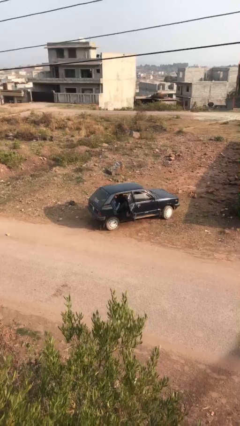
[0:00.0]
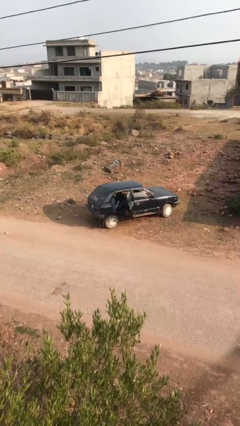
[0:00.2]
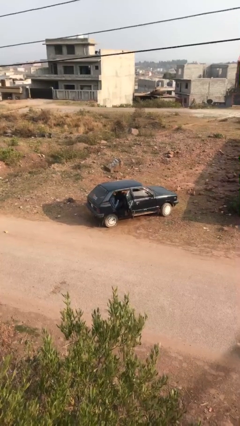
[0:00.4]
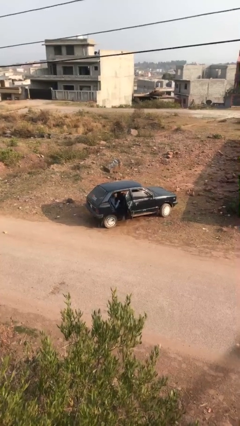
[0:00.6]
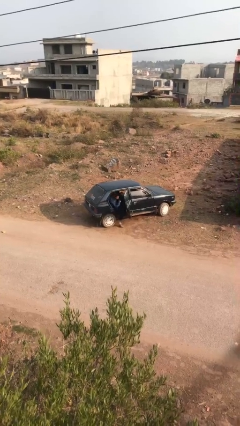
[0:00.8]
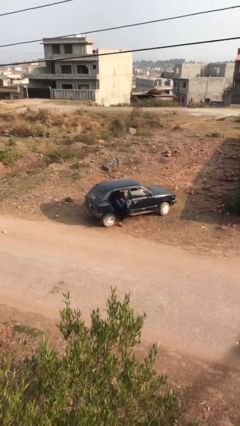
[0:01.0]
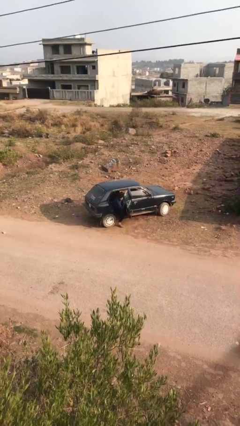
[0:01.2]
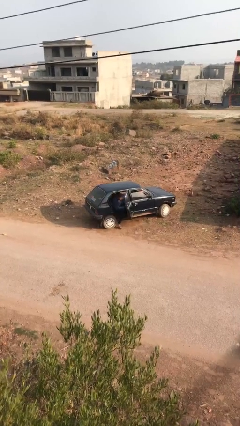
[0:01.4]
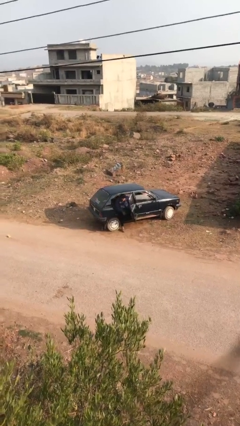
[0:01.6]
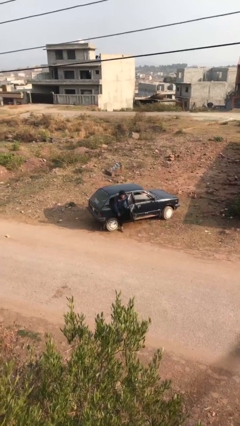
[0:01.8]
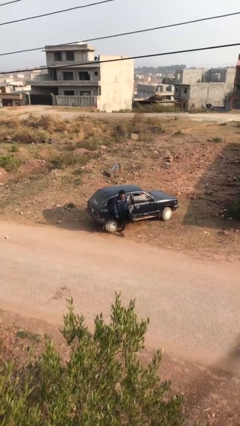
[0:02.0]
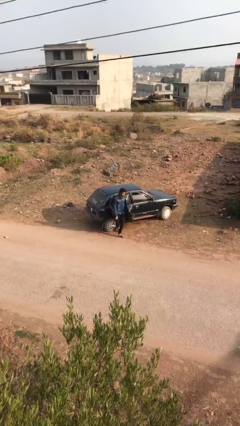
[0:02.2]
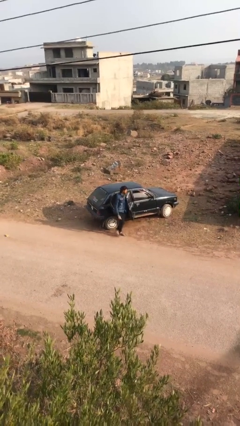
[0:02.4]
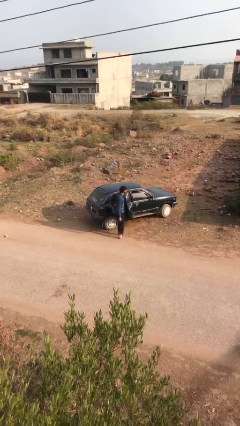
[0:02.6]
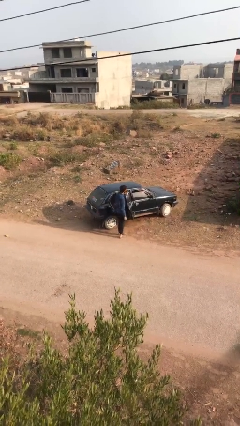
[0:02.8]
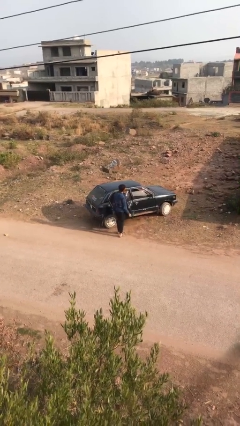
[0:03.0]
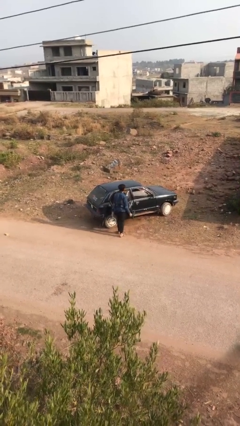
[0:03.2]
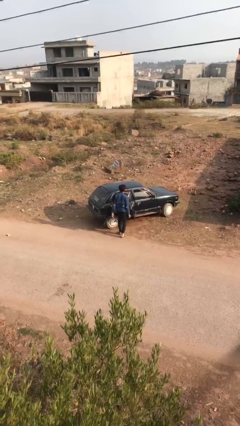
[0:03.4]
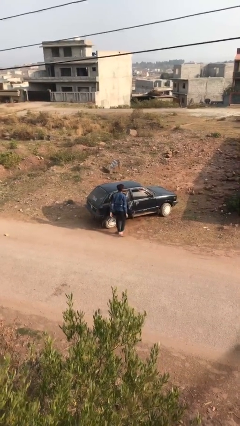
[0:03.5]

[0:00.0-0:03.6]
person exits car

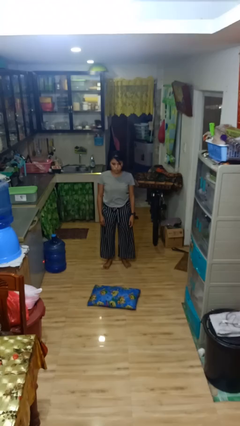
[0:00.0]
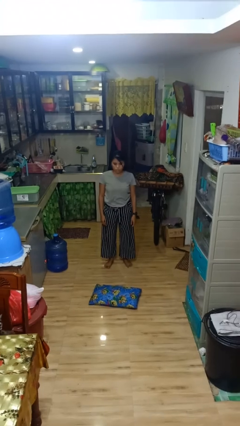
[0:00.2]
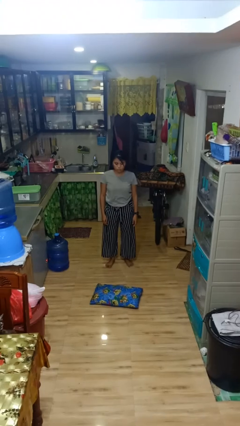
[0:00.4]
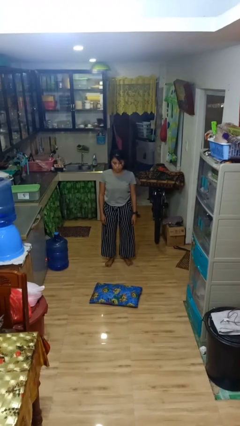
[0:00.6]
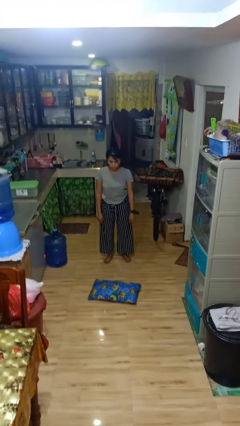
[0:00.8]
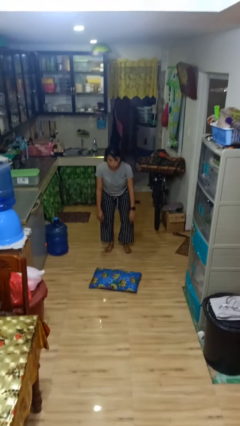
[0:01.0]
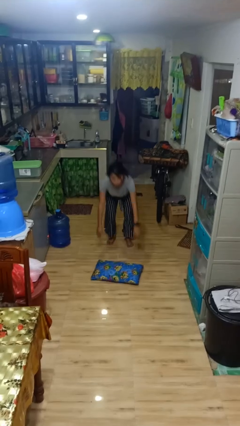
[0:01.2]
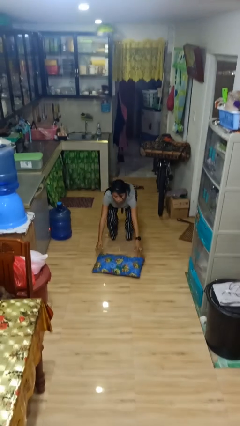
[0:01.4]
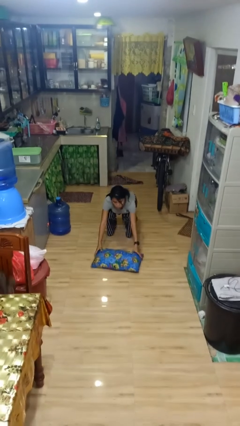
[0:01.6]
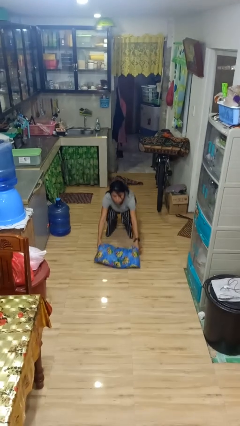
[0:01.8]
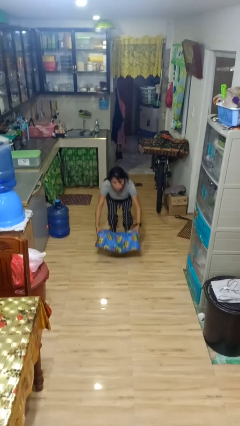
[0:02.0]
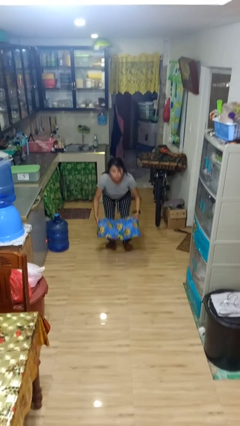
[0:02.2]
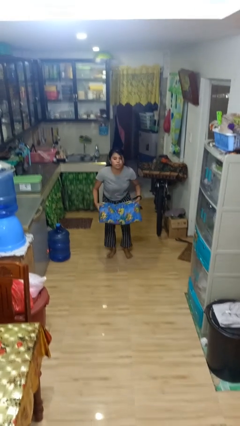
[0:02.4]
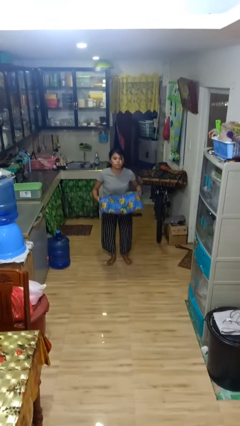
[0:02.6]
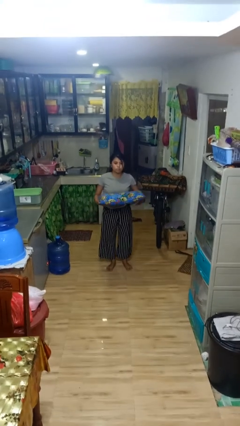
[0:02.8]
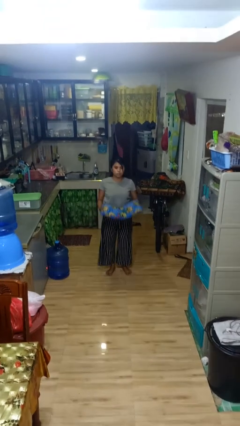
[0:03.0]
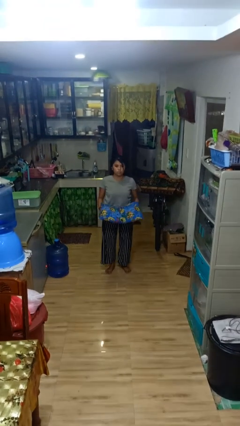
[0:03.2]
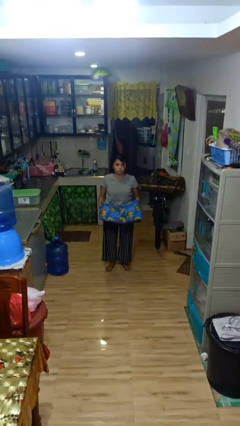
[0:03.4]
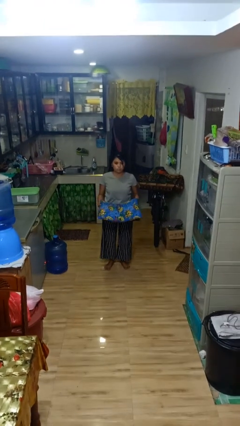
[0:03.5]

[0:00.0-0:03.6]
person picks up object from floor

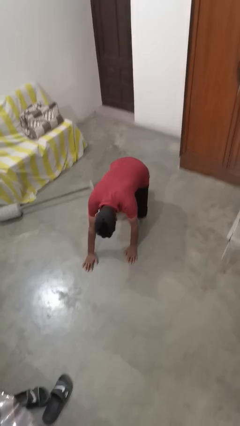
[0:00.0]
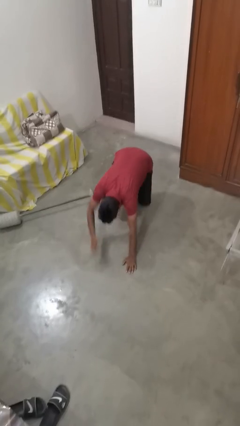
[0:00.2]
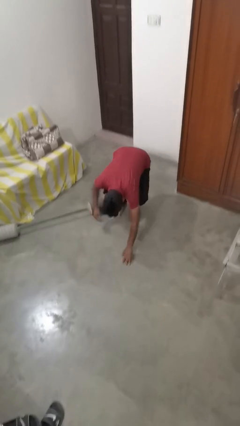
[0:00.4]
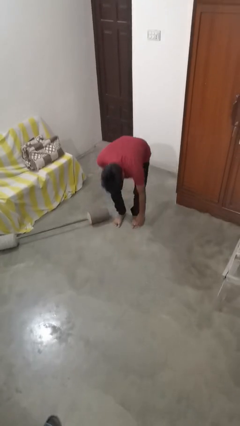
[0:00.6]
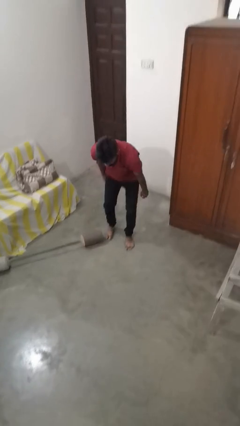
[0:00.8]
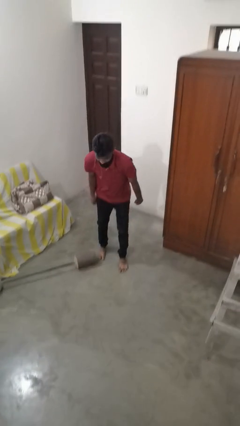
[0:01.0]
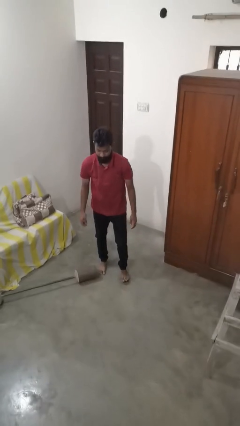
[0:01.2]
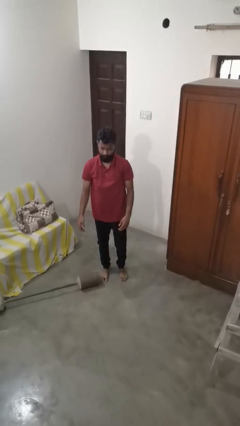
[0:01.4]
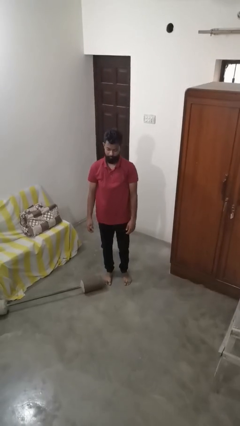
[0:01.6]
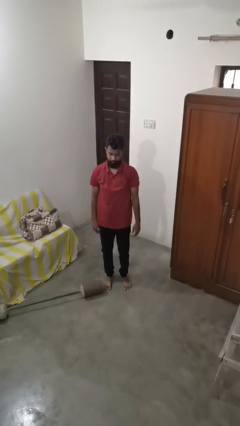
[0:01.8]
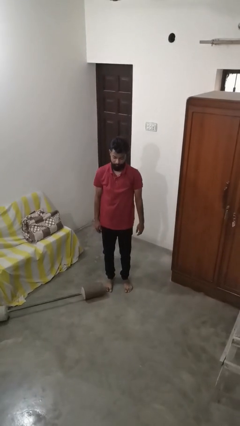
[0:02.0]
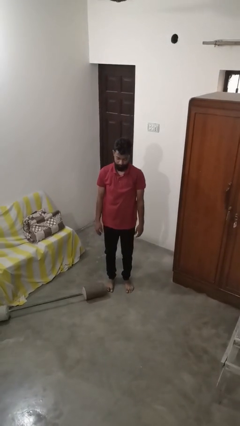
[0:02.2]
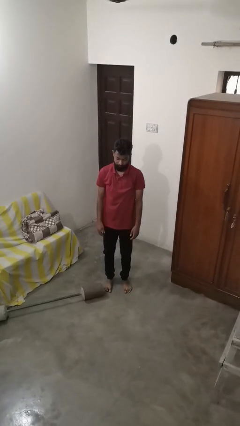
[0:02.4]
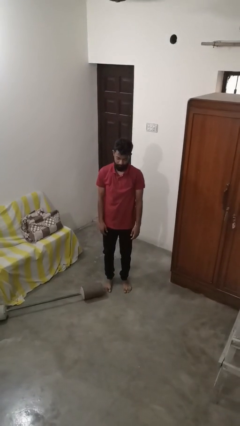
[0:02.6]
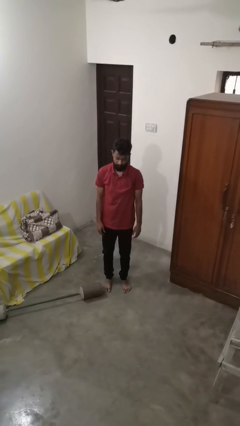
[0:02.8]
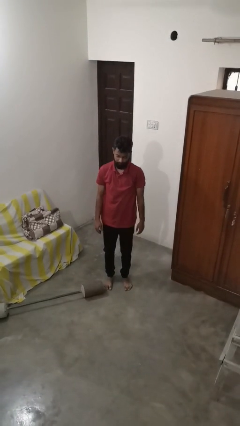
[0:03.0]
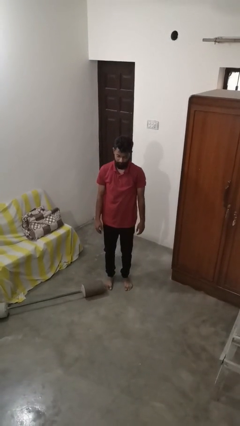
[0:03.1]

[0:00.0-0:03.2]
person stands up from floor

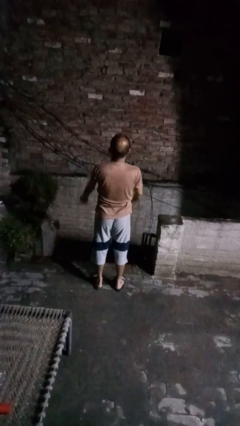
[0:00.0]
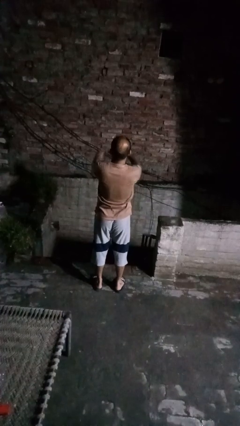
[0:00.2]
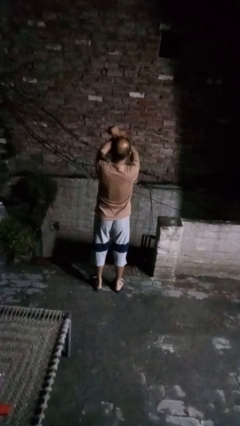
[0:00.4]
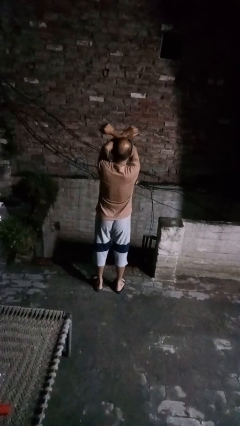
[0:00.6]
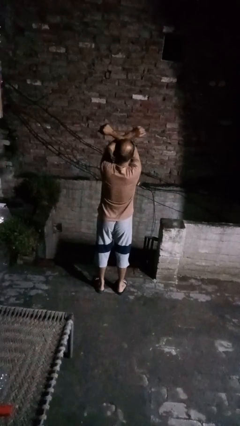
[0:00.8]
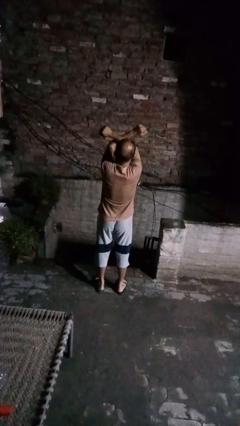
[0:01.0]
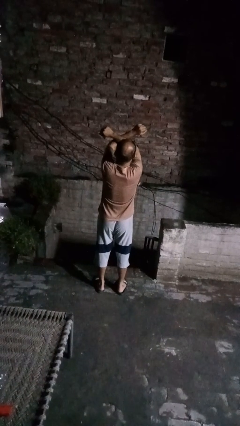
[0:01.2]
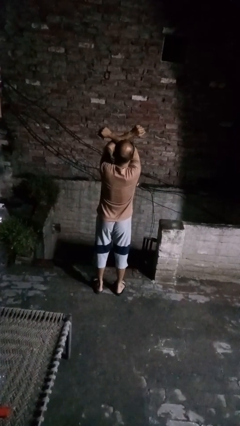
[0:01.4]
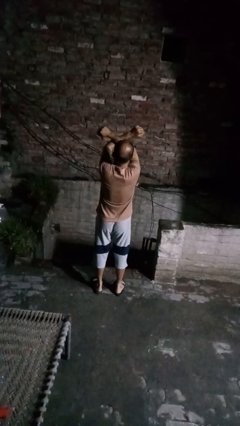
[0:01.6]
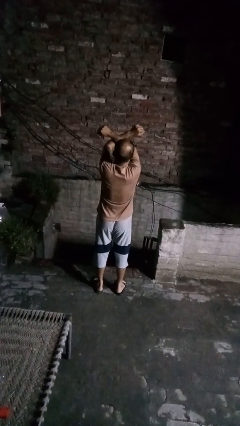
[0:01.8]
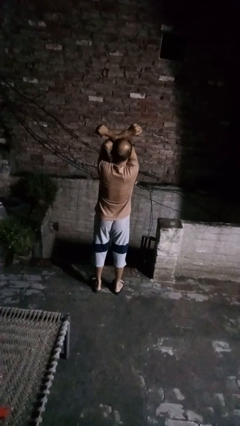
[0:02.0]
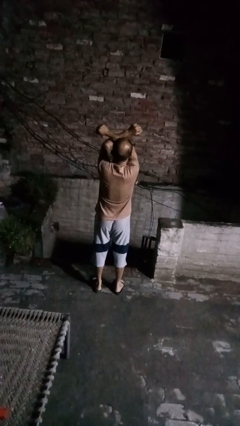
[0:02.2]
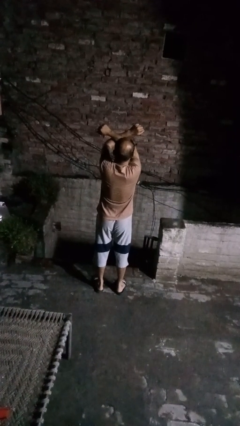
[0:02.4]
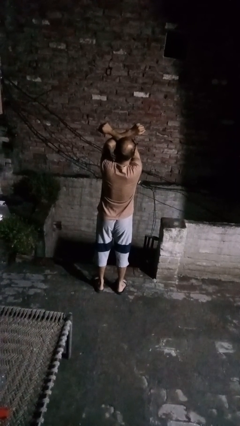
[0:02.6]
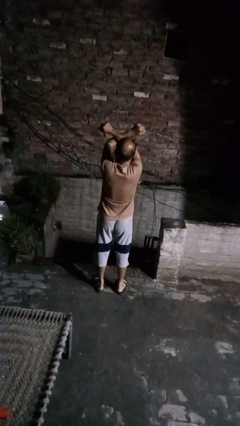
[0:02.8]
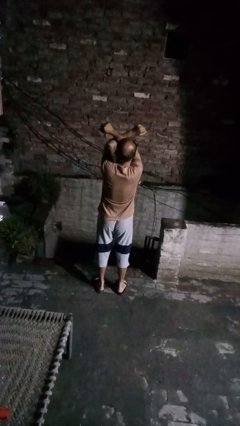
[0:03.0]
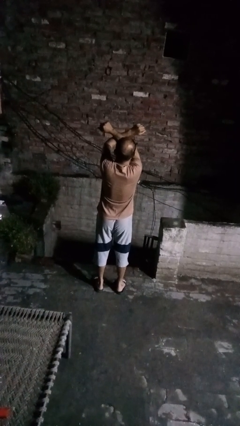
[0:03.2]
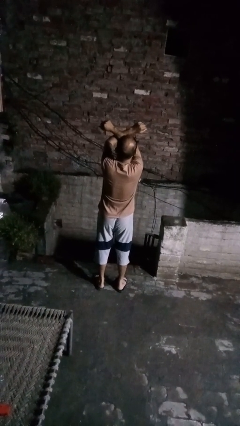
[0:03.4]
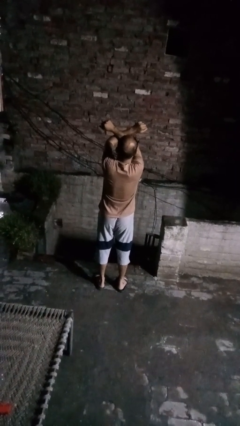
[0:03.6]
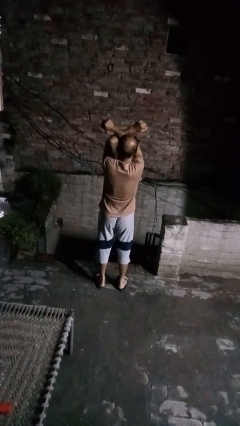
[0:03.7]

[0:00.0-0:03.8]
person gestures arms x

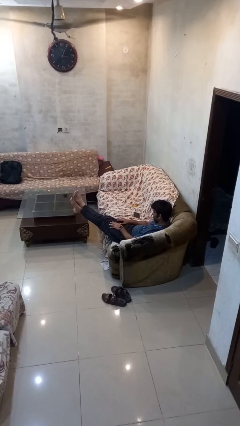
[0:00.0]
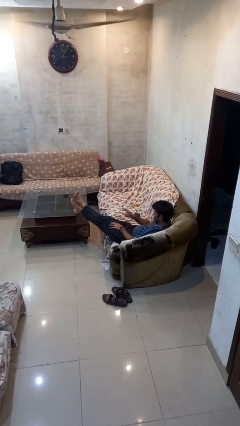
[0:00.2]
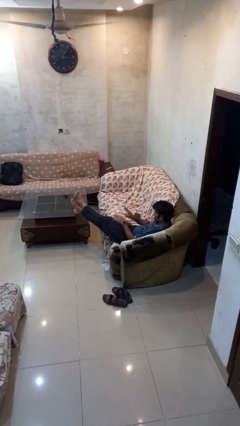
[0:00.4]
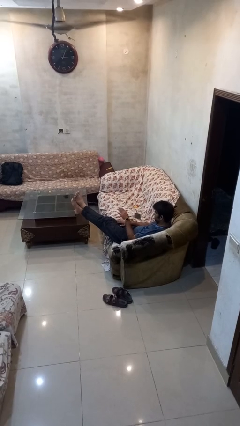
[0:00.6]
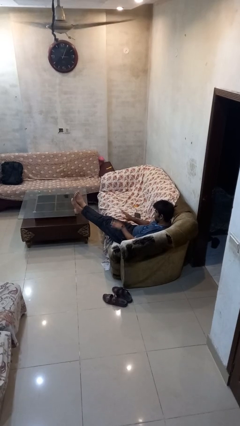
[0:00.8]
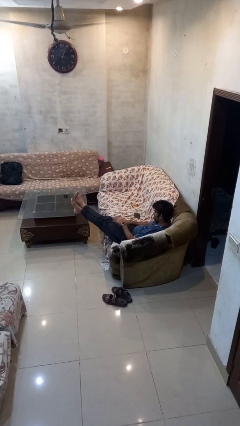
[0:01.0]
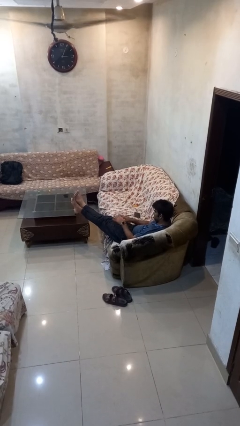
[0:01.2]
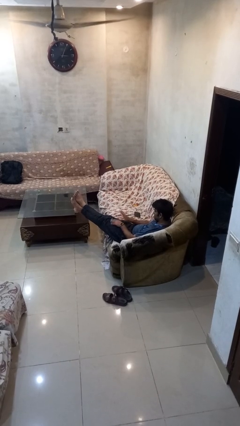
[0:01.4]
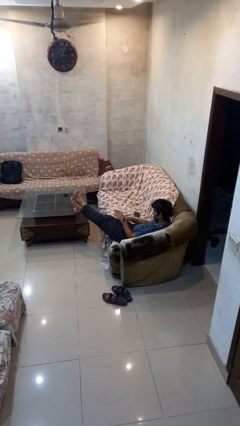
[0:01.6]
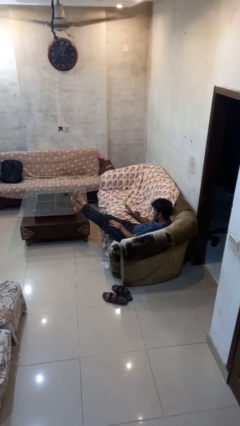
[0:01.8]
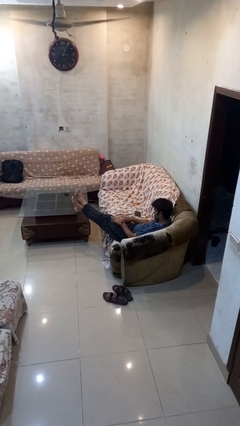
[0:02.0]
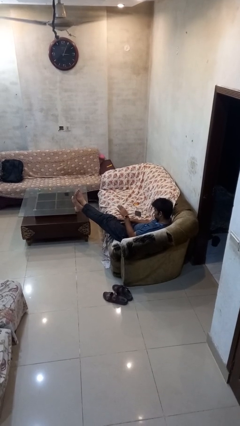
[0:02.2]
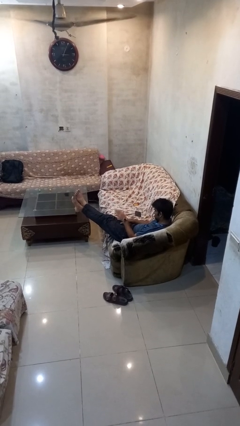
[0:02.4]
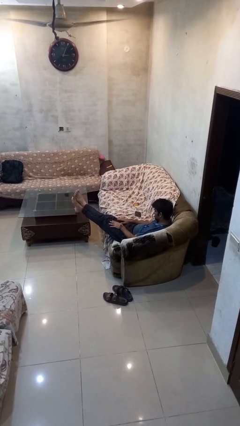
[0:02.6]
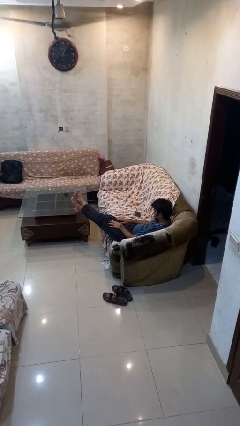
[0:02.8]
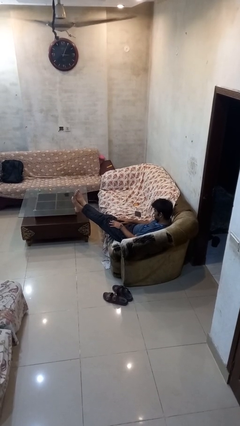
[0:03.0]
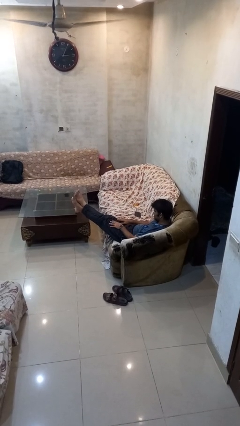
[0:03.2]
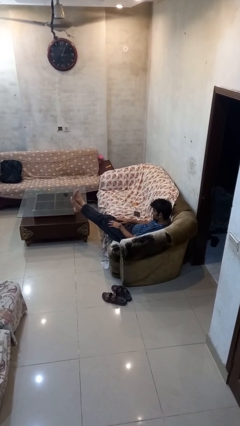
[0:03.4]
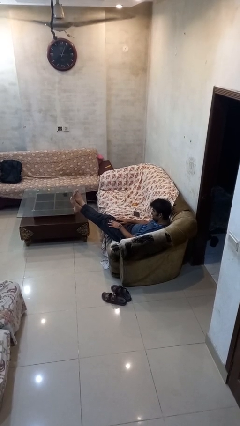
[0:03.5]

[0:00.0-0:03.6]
person slaps hands on thighs
